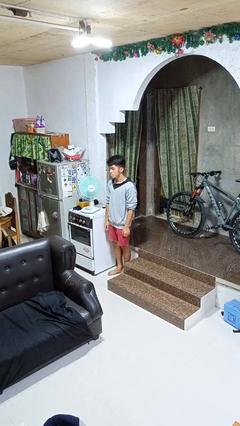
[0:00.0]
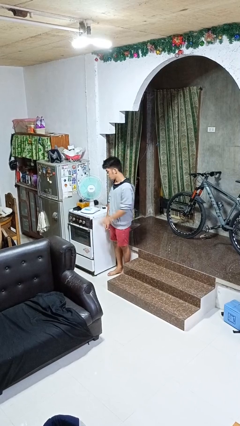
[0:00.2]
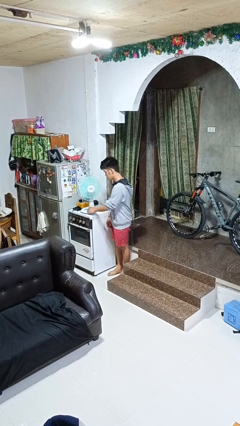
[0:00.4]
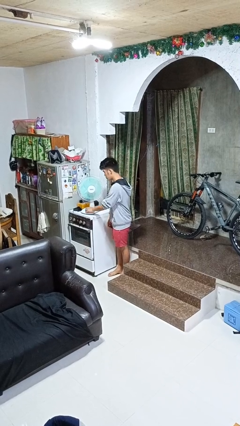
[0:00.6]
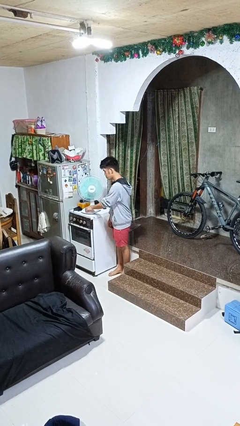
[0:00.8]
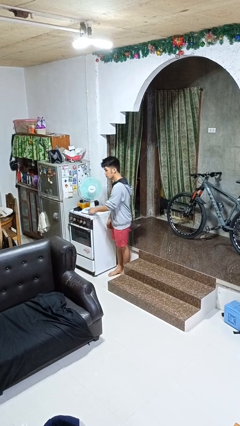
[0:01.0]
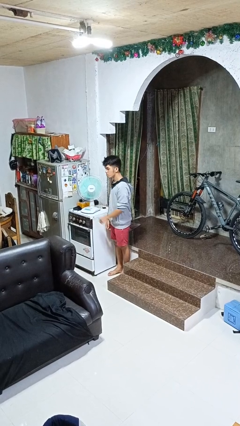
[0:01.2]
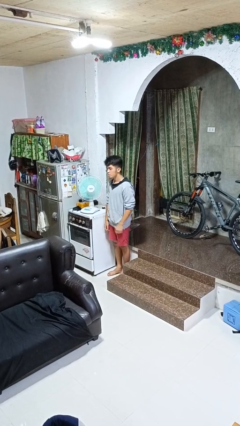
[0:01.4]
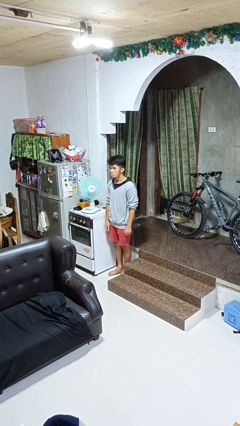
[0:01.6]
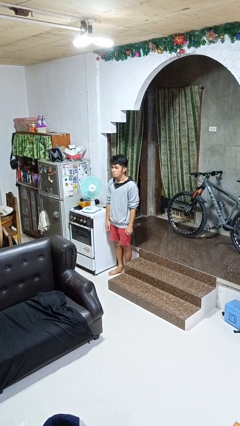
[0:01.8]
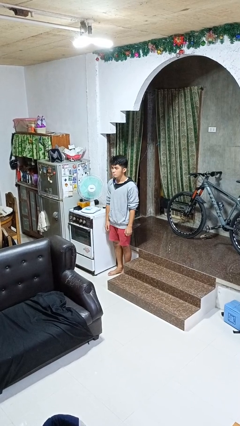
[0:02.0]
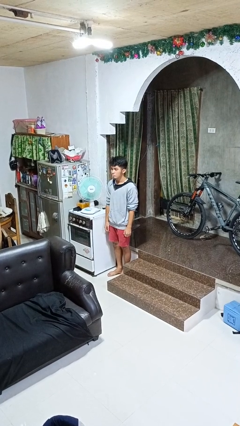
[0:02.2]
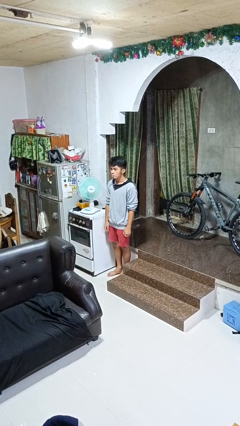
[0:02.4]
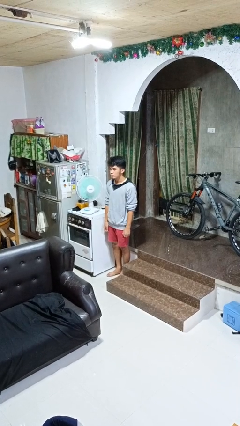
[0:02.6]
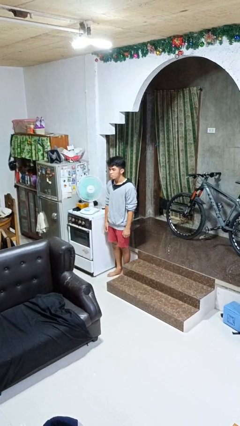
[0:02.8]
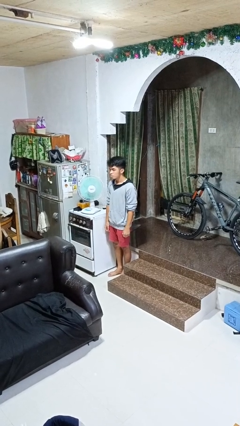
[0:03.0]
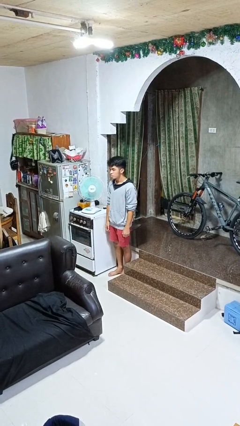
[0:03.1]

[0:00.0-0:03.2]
person turns on fan

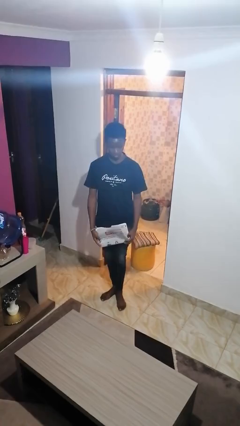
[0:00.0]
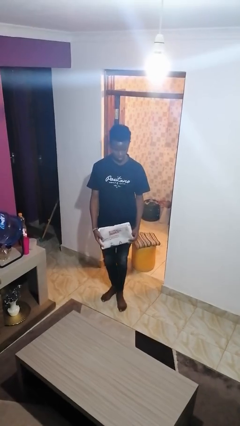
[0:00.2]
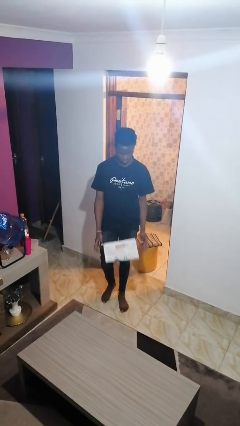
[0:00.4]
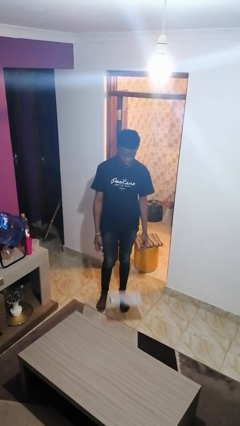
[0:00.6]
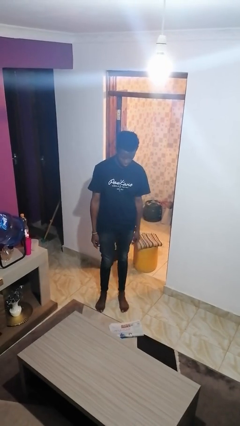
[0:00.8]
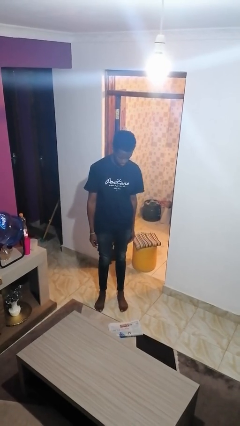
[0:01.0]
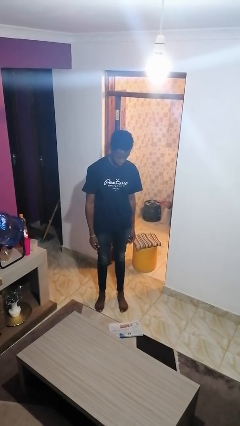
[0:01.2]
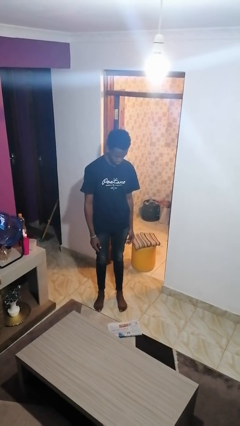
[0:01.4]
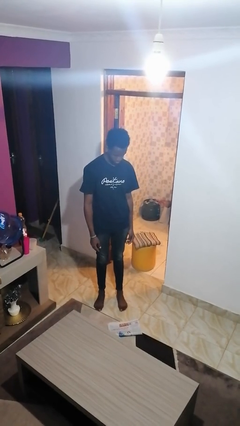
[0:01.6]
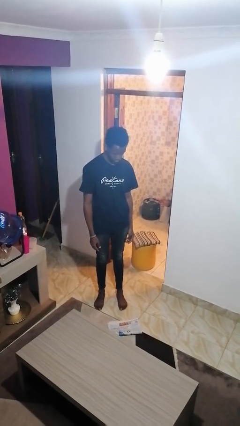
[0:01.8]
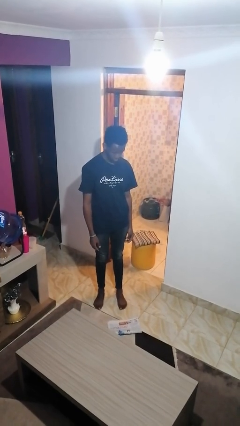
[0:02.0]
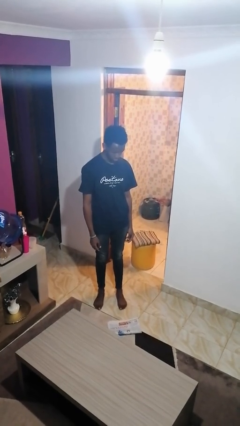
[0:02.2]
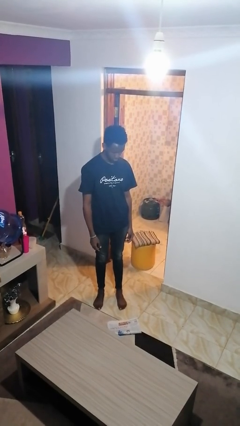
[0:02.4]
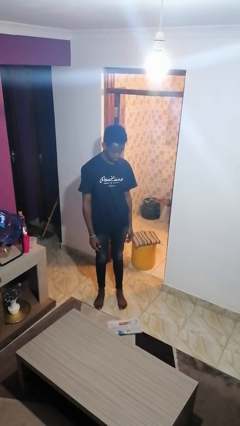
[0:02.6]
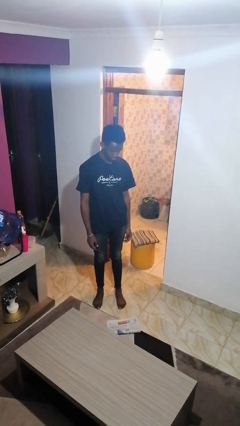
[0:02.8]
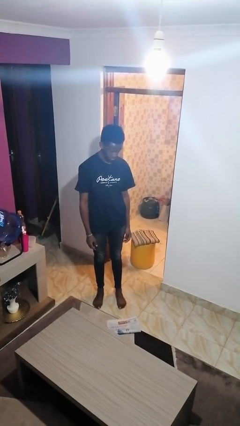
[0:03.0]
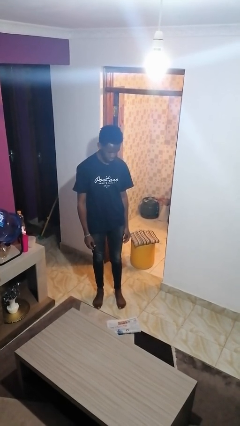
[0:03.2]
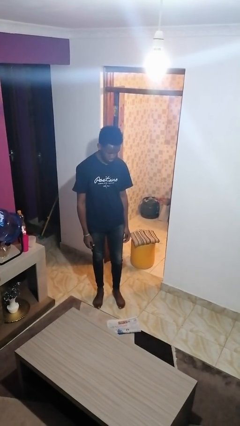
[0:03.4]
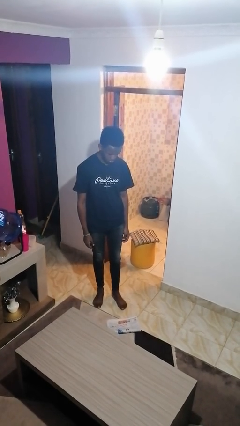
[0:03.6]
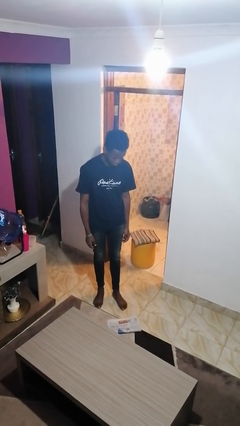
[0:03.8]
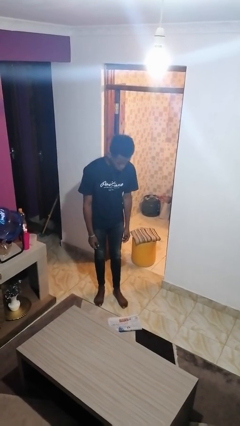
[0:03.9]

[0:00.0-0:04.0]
person drops object

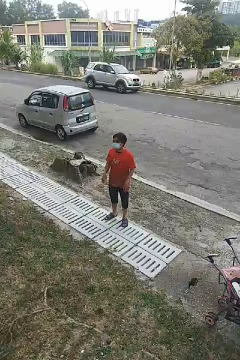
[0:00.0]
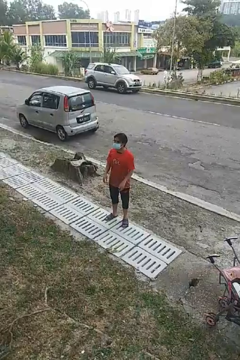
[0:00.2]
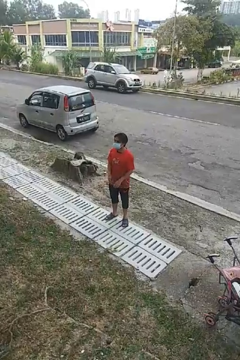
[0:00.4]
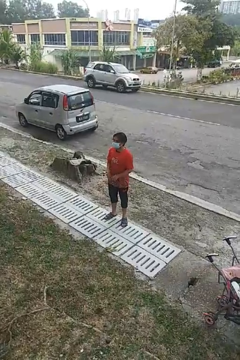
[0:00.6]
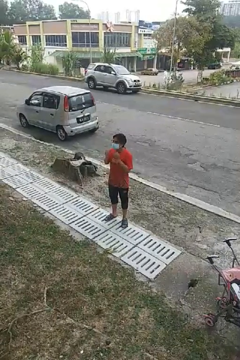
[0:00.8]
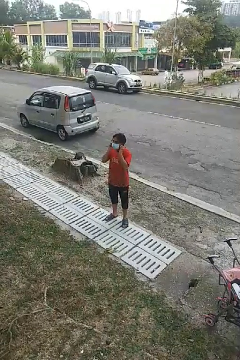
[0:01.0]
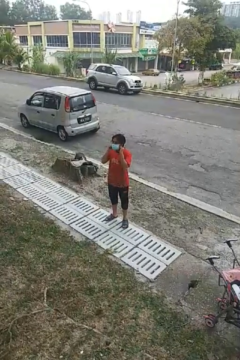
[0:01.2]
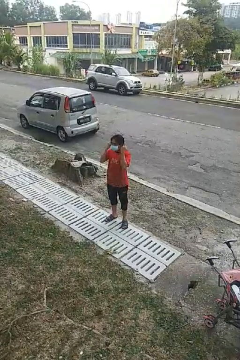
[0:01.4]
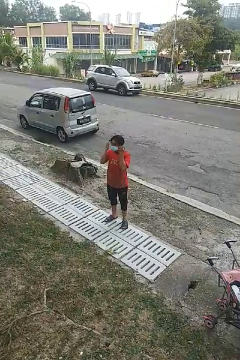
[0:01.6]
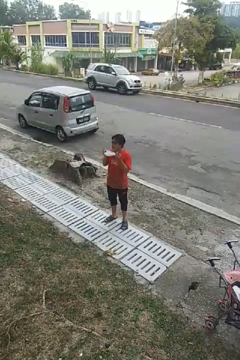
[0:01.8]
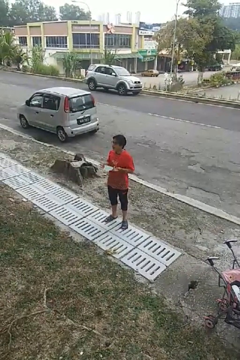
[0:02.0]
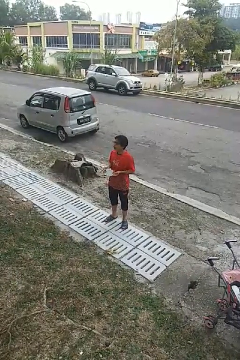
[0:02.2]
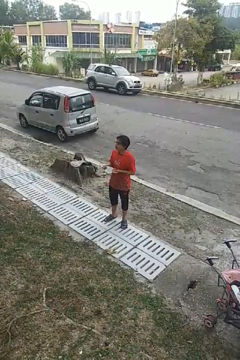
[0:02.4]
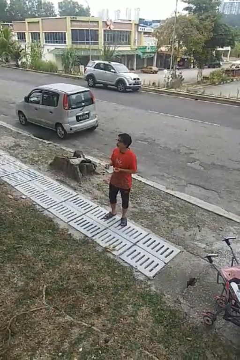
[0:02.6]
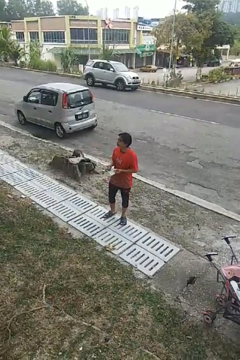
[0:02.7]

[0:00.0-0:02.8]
person takes off facemask

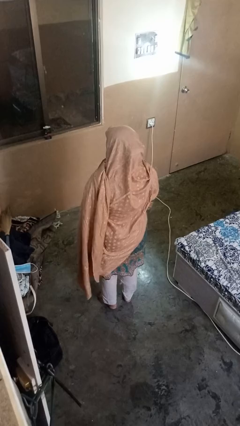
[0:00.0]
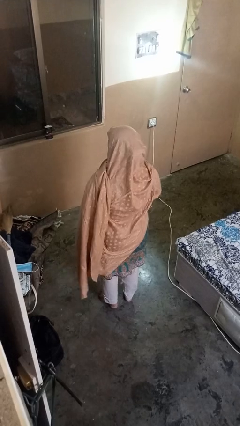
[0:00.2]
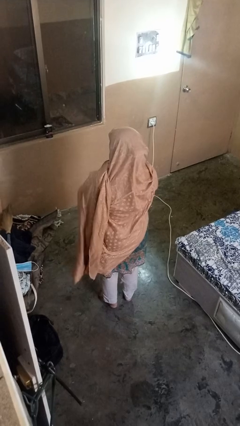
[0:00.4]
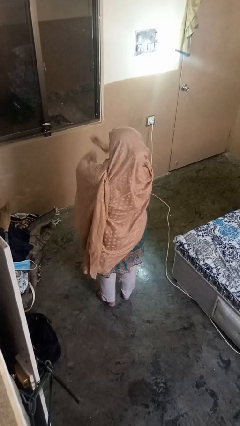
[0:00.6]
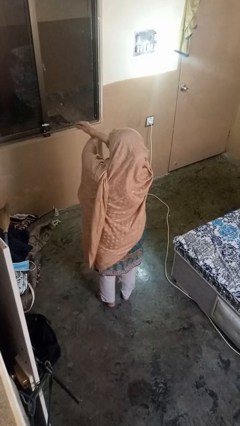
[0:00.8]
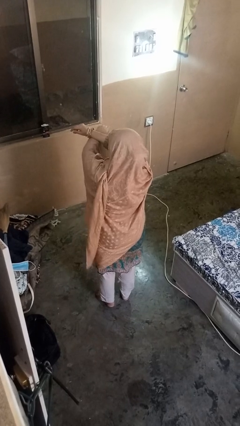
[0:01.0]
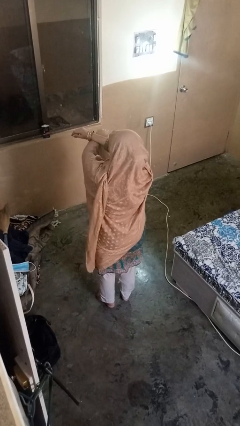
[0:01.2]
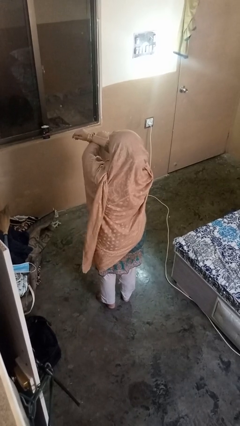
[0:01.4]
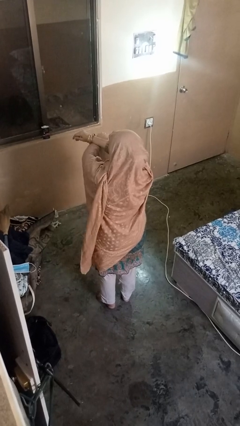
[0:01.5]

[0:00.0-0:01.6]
person crosses arms

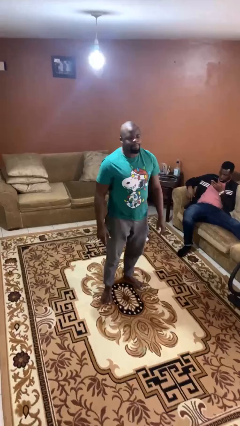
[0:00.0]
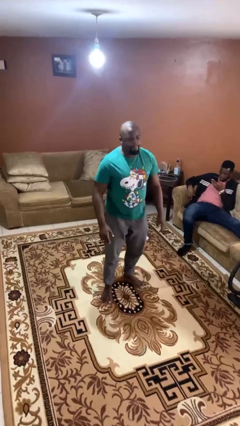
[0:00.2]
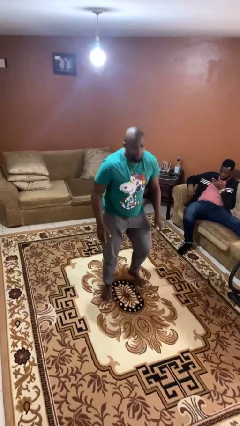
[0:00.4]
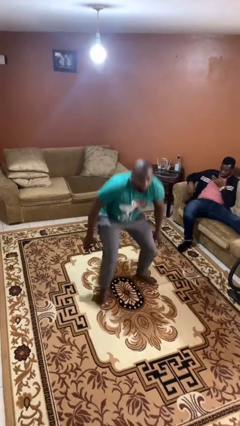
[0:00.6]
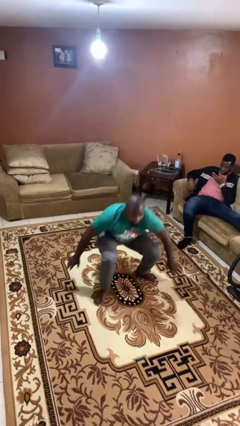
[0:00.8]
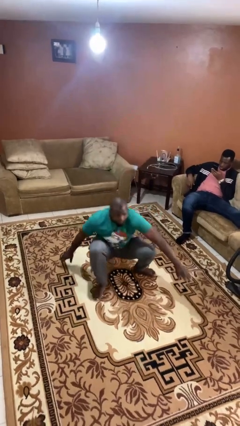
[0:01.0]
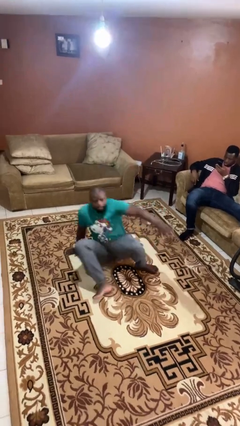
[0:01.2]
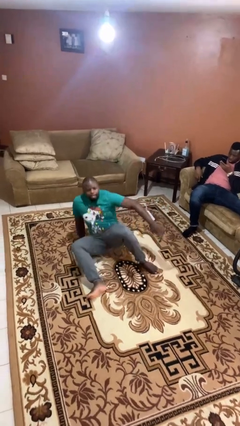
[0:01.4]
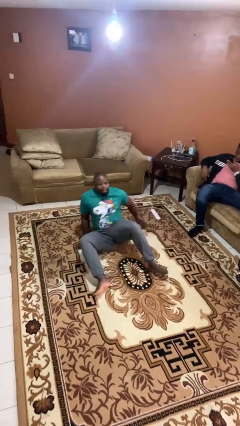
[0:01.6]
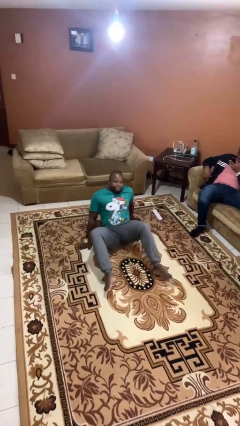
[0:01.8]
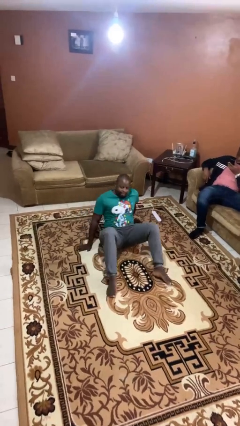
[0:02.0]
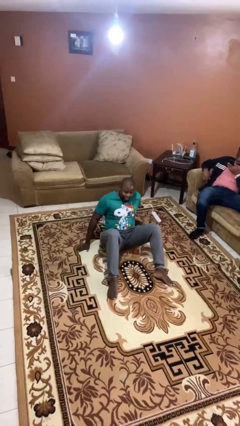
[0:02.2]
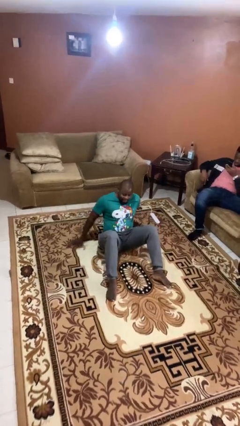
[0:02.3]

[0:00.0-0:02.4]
person sits down

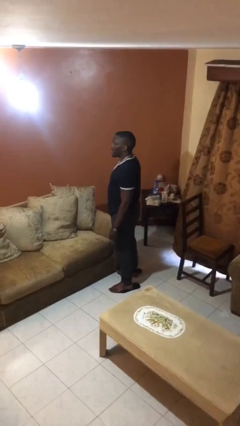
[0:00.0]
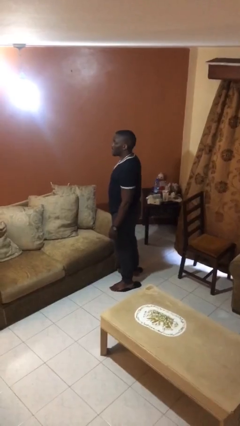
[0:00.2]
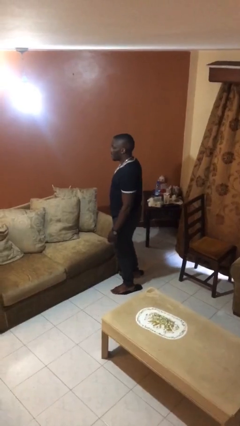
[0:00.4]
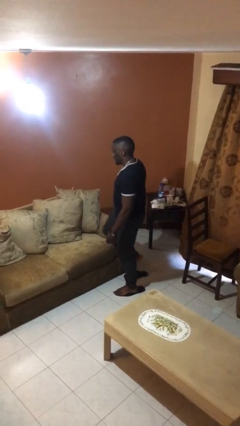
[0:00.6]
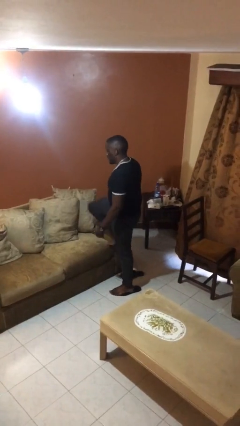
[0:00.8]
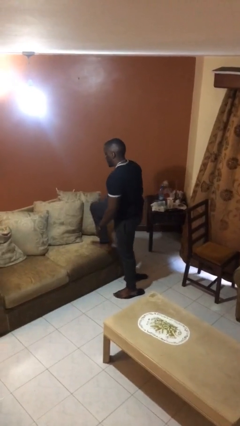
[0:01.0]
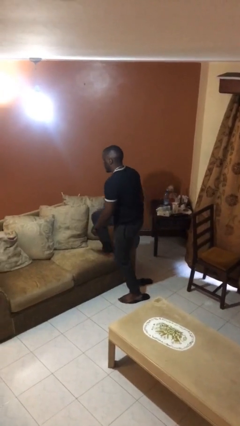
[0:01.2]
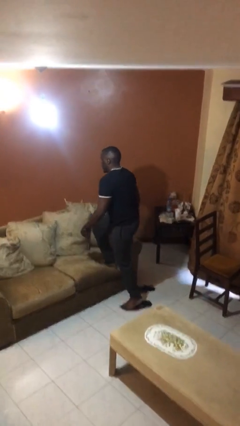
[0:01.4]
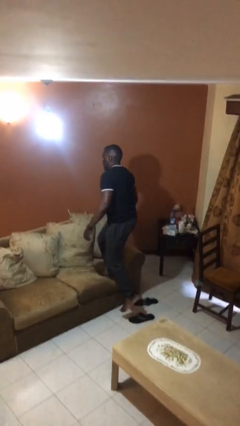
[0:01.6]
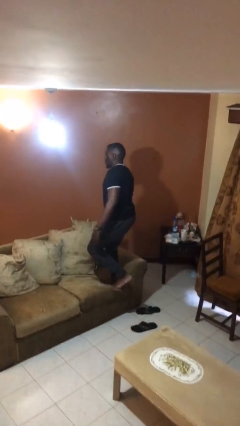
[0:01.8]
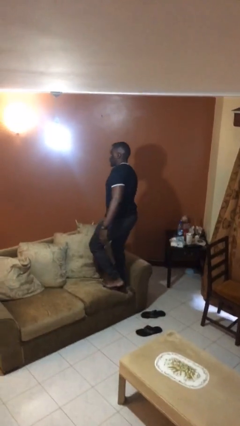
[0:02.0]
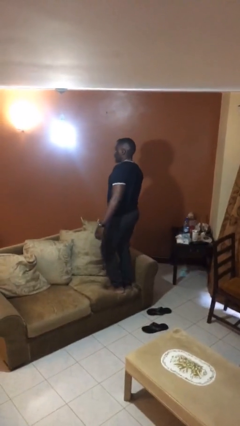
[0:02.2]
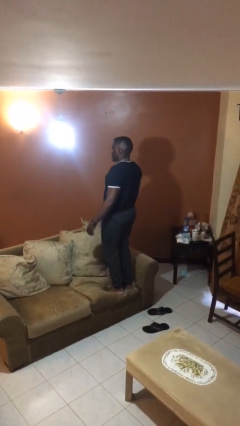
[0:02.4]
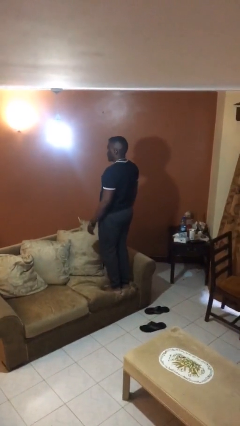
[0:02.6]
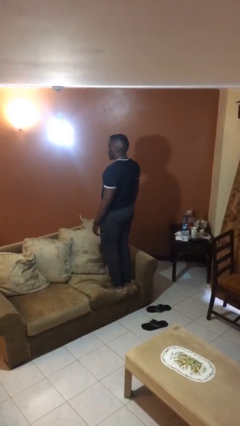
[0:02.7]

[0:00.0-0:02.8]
person climbs on couch

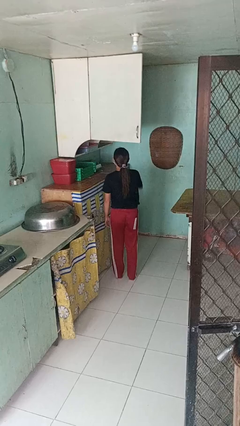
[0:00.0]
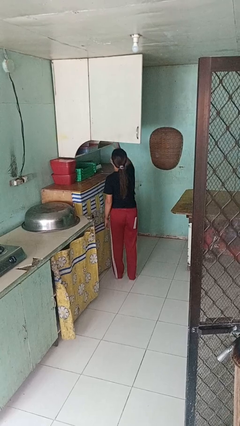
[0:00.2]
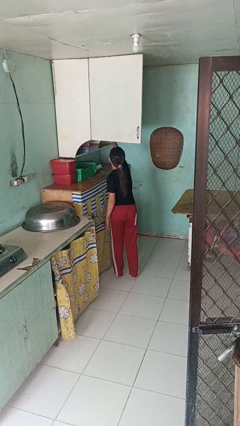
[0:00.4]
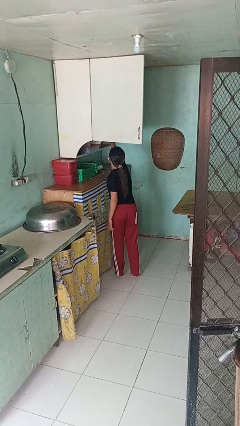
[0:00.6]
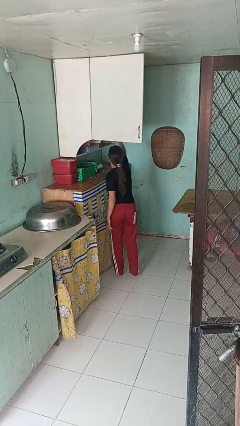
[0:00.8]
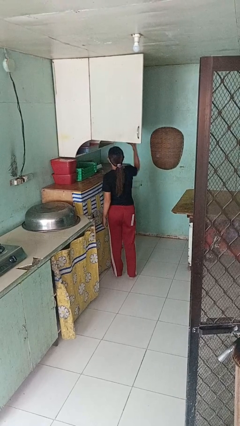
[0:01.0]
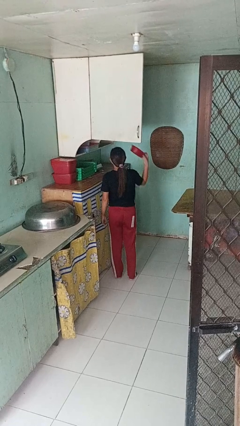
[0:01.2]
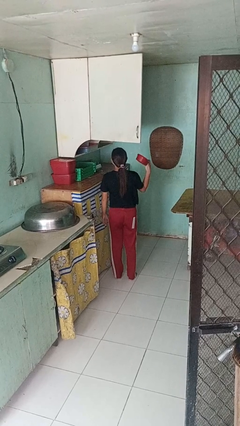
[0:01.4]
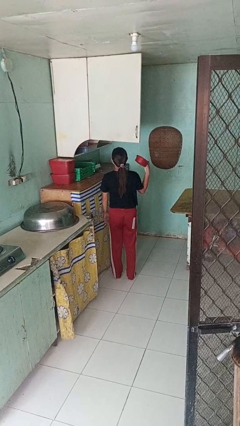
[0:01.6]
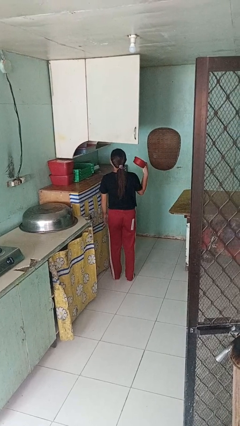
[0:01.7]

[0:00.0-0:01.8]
person takes object from cabinet
